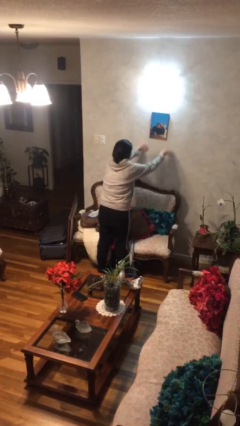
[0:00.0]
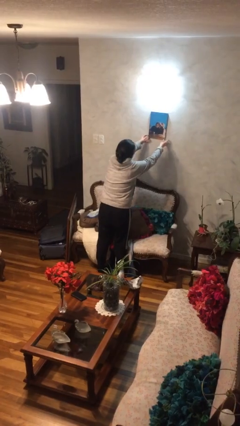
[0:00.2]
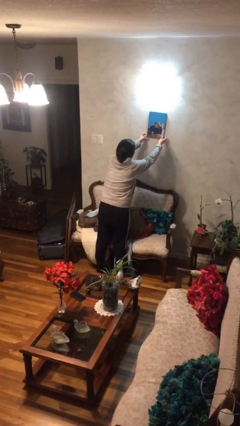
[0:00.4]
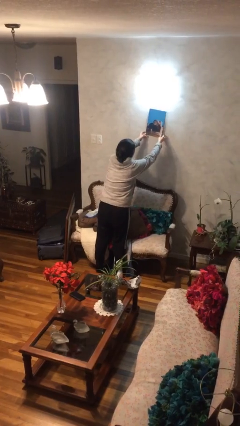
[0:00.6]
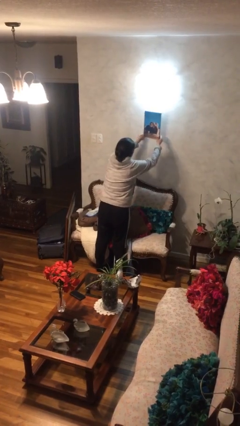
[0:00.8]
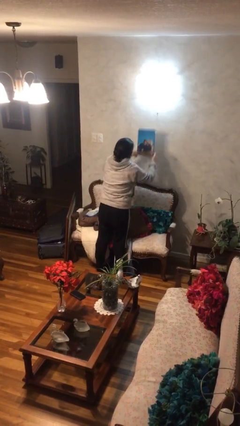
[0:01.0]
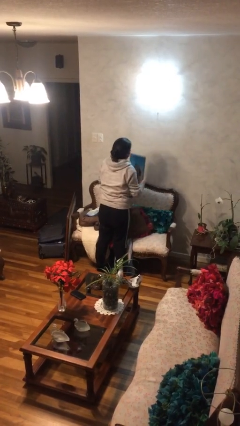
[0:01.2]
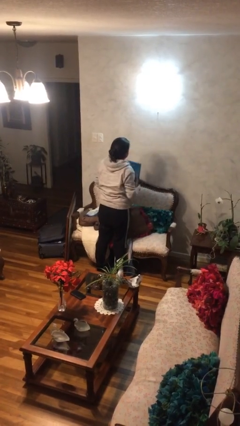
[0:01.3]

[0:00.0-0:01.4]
person takes down picture frame

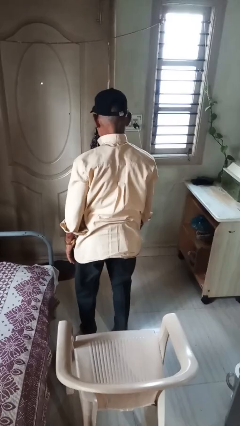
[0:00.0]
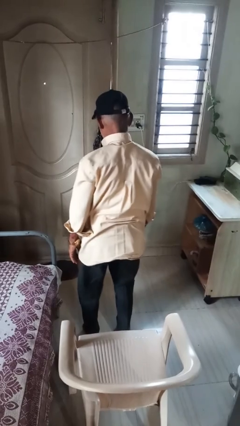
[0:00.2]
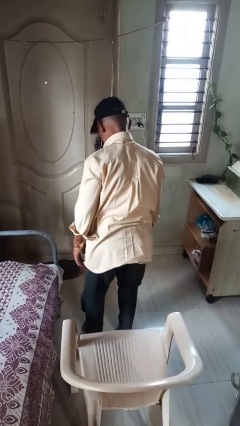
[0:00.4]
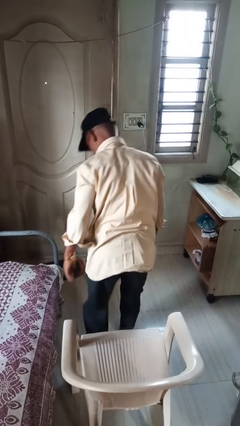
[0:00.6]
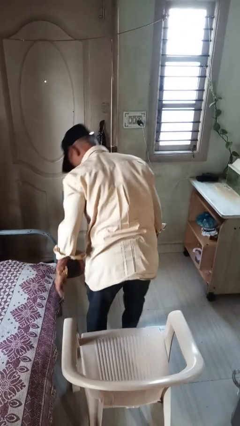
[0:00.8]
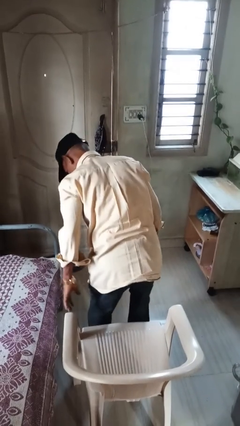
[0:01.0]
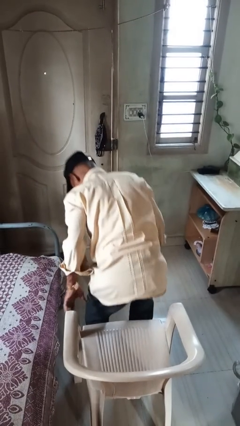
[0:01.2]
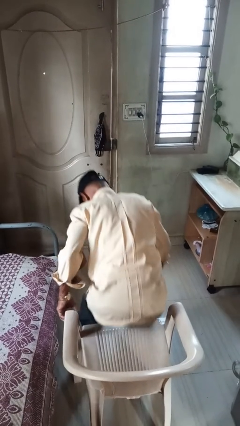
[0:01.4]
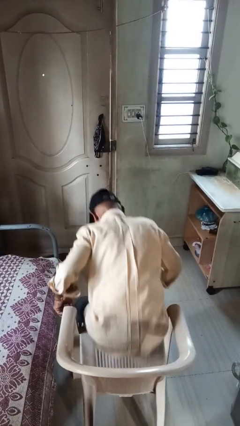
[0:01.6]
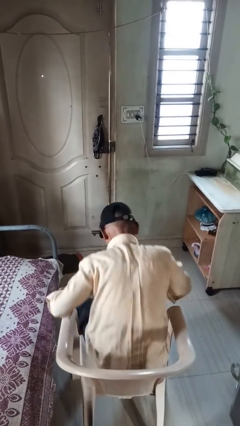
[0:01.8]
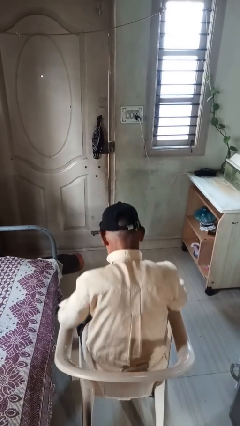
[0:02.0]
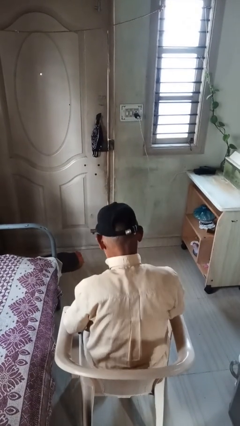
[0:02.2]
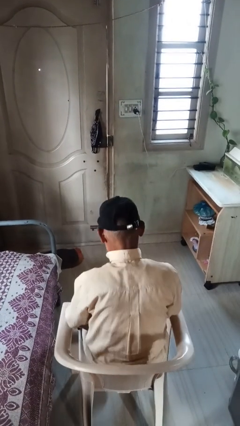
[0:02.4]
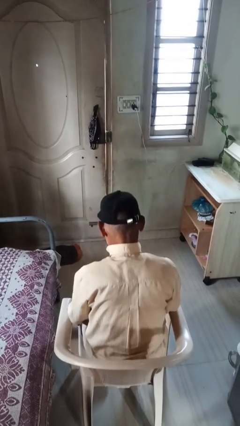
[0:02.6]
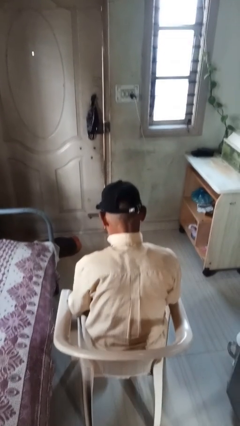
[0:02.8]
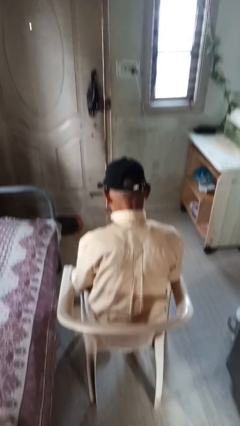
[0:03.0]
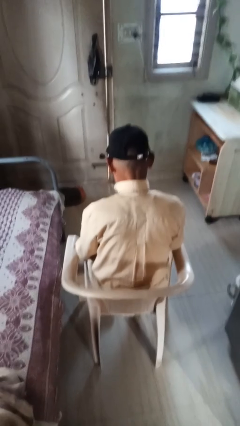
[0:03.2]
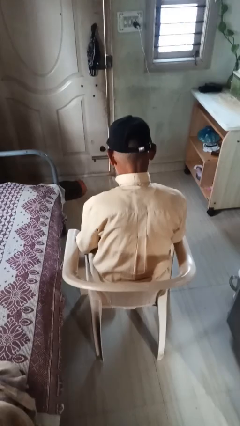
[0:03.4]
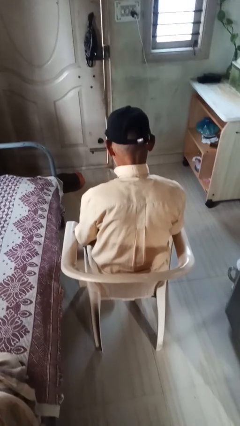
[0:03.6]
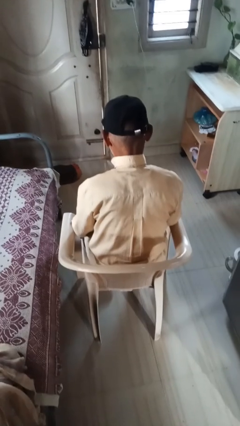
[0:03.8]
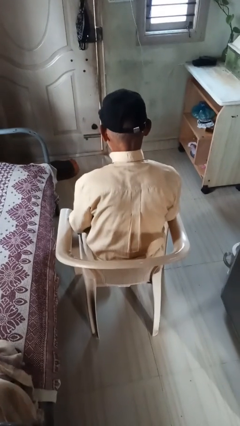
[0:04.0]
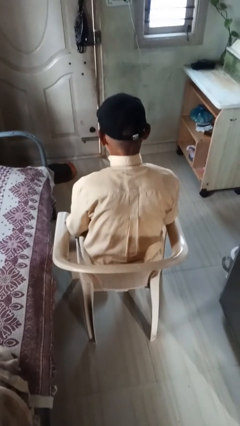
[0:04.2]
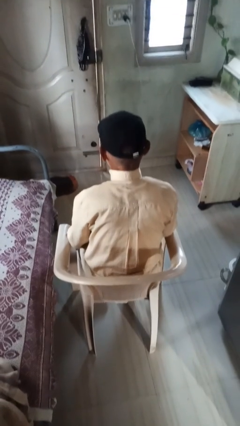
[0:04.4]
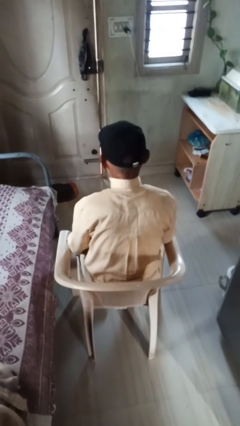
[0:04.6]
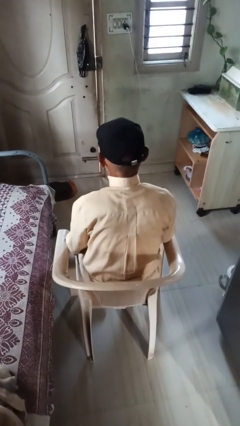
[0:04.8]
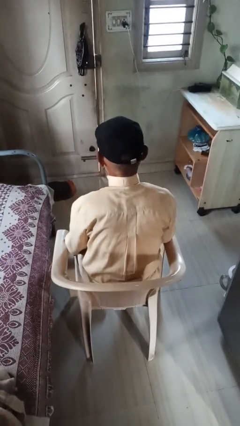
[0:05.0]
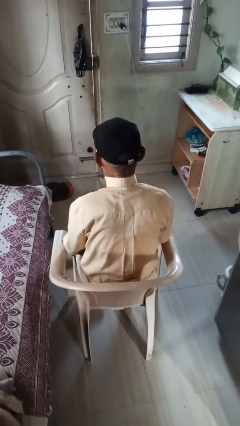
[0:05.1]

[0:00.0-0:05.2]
person sits down

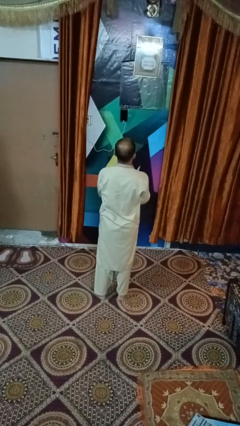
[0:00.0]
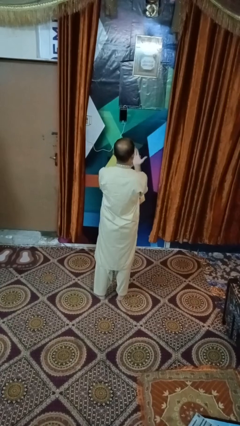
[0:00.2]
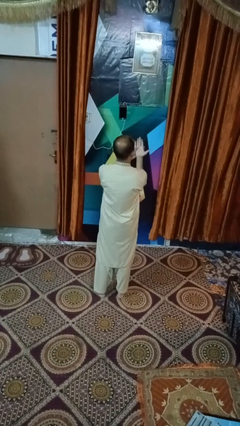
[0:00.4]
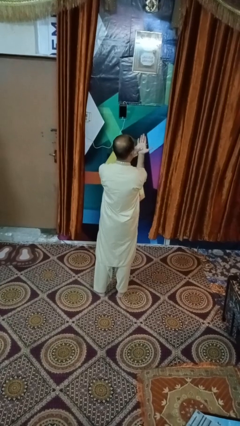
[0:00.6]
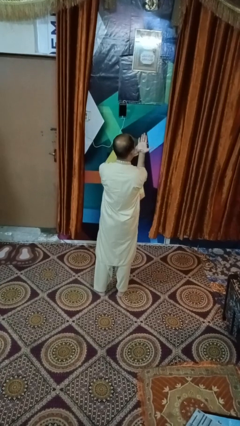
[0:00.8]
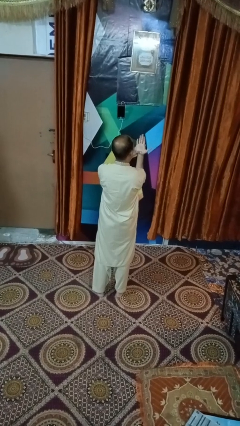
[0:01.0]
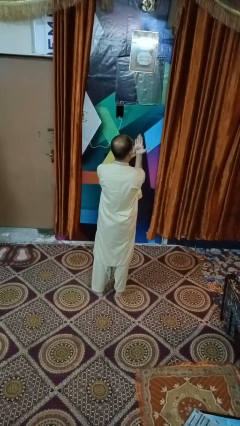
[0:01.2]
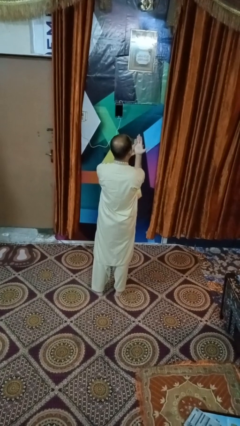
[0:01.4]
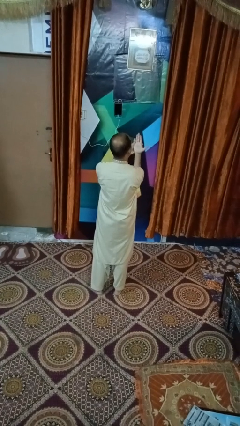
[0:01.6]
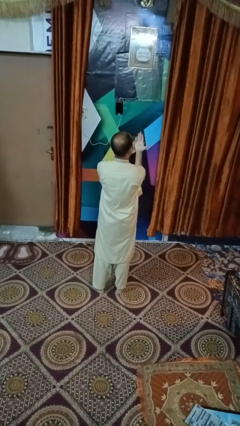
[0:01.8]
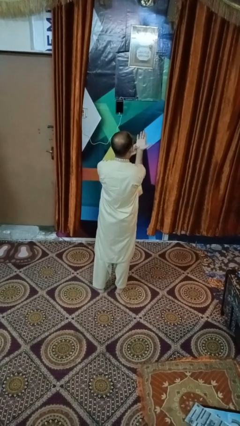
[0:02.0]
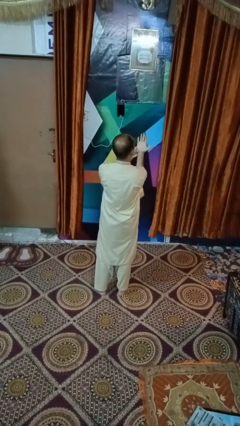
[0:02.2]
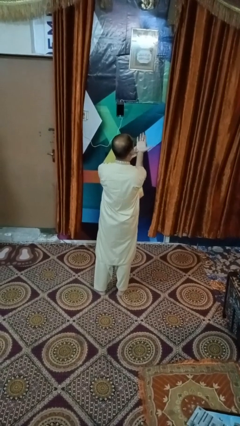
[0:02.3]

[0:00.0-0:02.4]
person looks at hands in lap

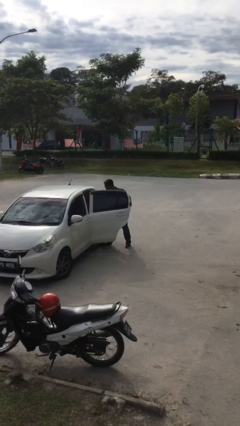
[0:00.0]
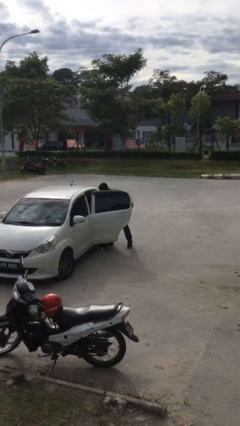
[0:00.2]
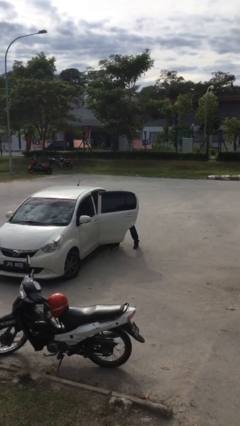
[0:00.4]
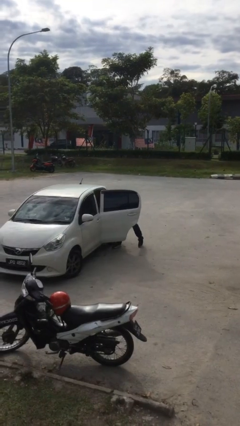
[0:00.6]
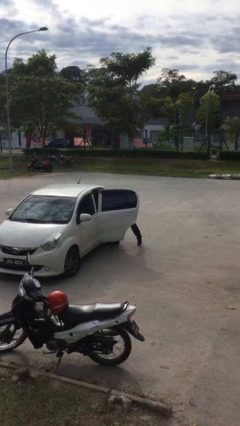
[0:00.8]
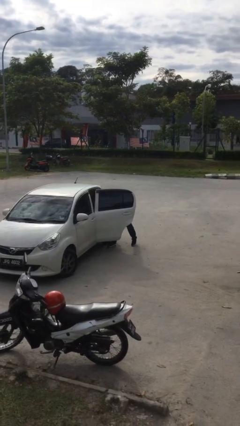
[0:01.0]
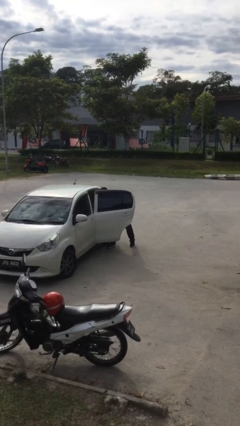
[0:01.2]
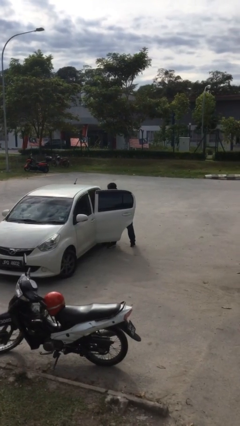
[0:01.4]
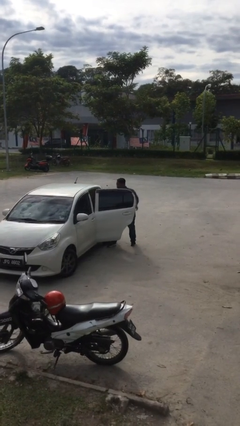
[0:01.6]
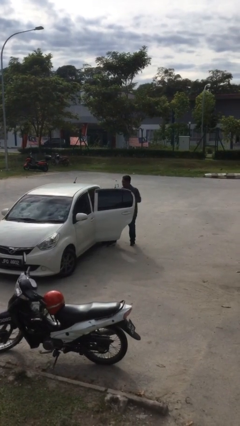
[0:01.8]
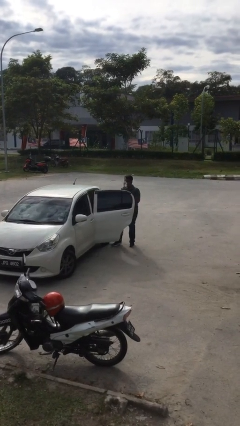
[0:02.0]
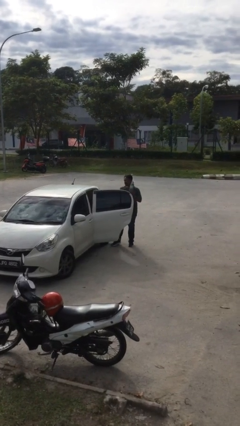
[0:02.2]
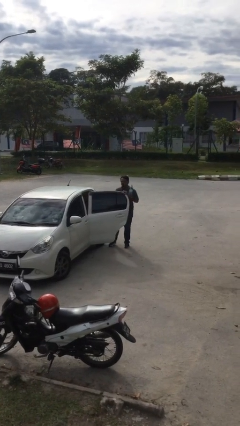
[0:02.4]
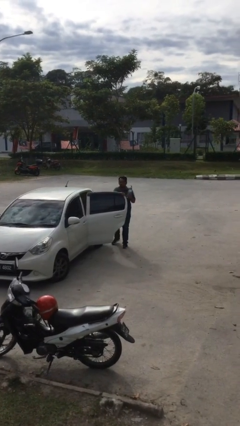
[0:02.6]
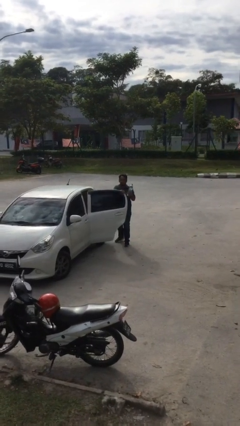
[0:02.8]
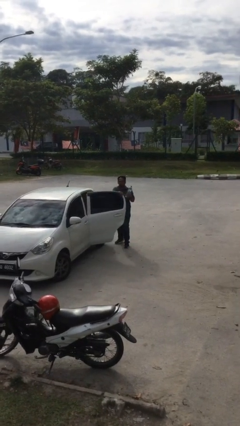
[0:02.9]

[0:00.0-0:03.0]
person unloads car

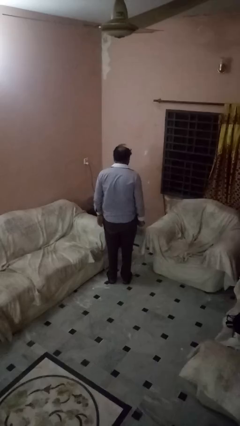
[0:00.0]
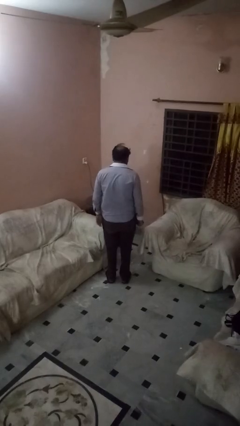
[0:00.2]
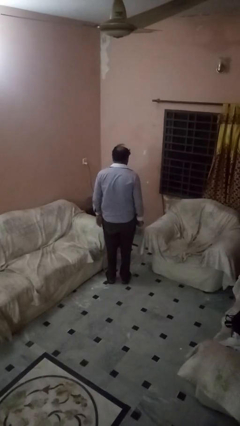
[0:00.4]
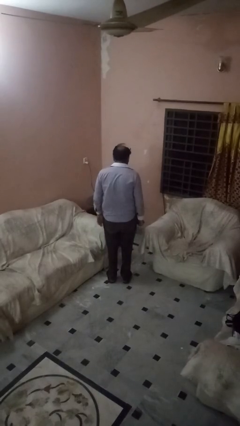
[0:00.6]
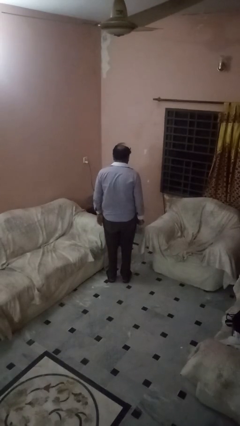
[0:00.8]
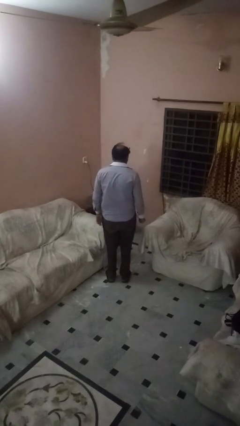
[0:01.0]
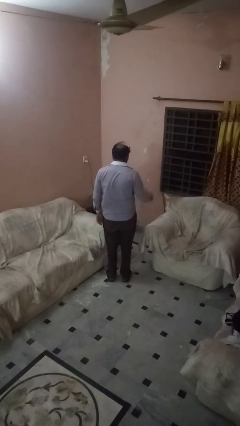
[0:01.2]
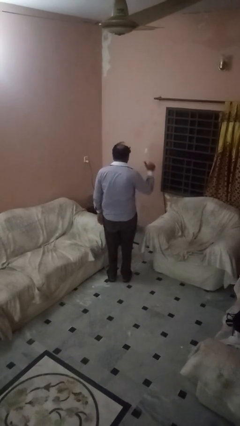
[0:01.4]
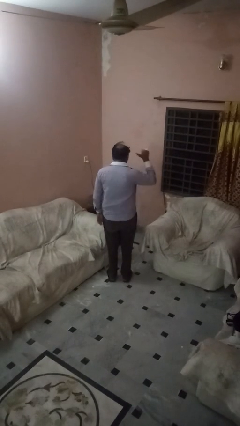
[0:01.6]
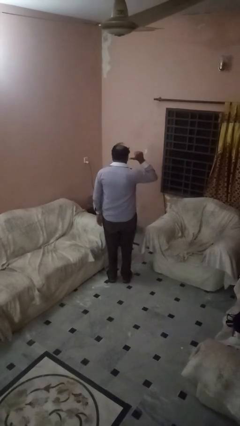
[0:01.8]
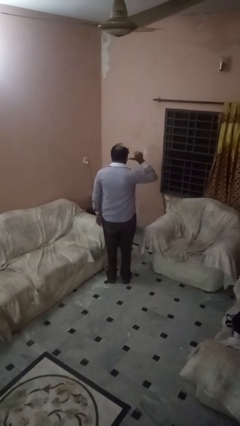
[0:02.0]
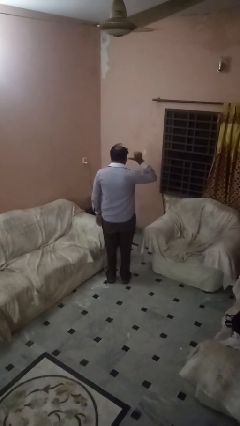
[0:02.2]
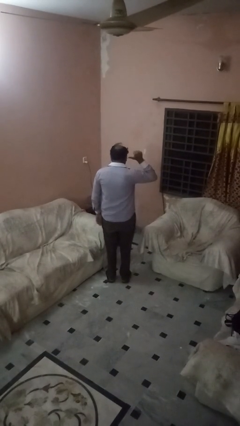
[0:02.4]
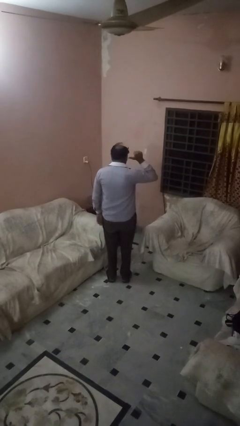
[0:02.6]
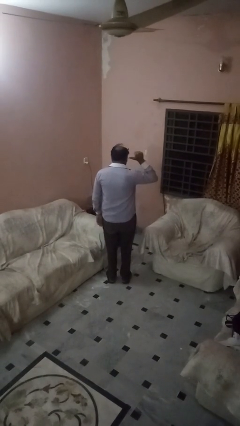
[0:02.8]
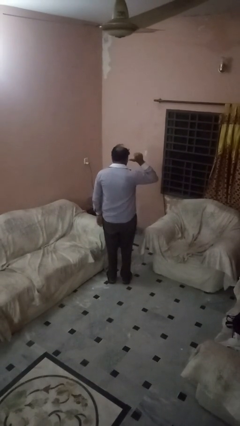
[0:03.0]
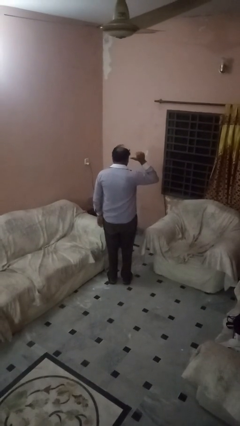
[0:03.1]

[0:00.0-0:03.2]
person gestures behind me

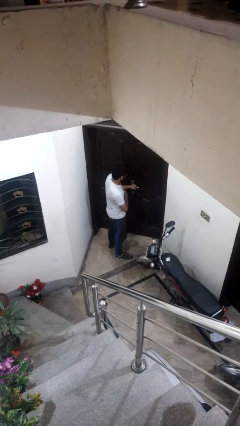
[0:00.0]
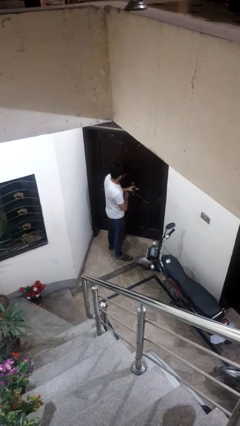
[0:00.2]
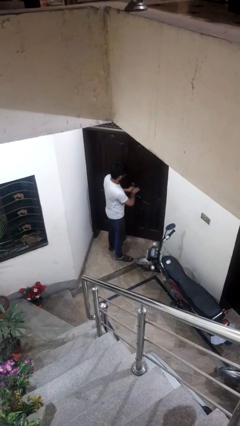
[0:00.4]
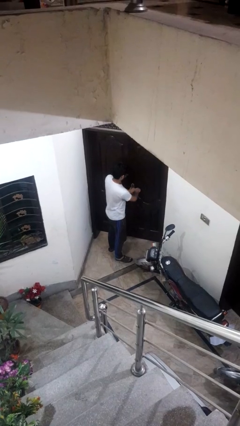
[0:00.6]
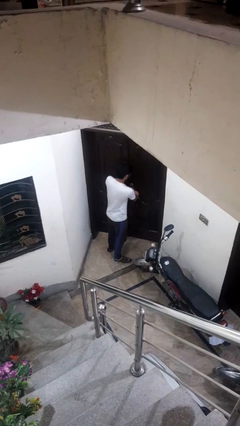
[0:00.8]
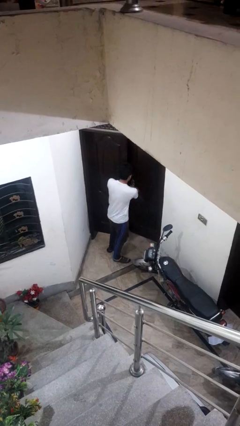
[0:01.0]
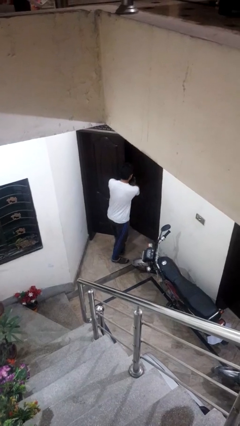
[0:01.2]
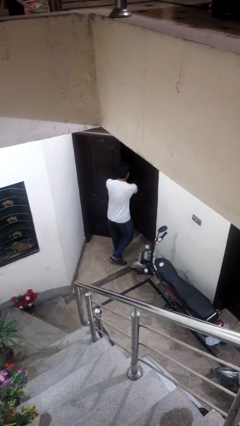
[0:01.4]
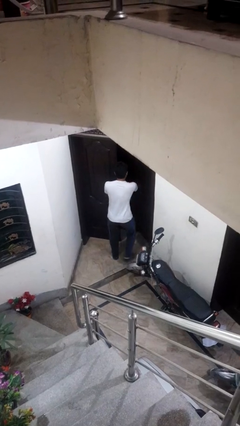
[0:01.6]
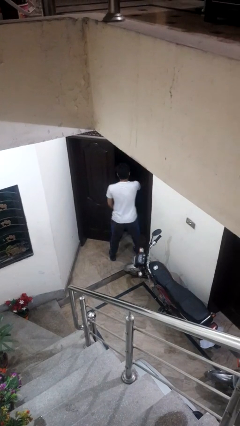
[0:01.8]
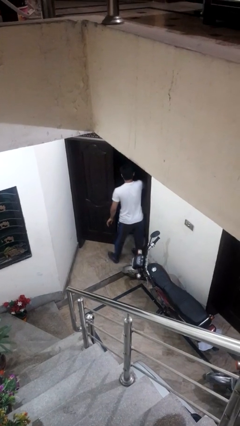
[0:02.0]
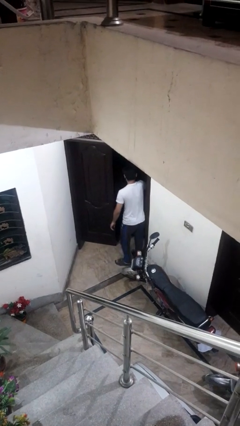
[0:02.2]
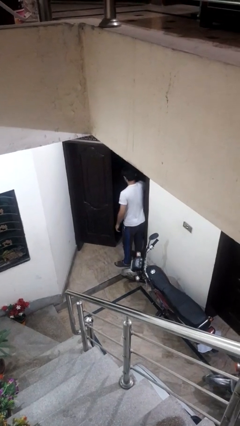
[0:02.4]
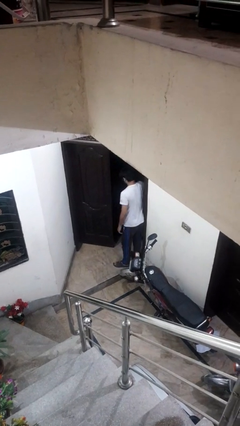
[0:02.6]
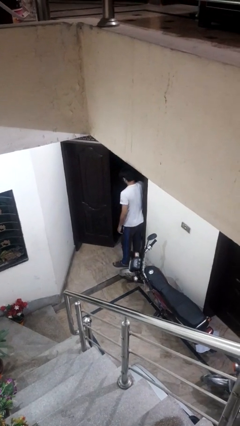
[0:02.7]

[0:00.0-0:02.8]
person opens facility door
